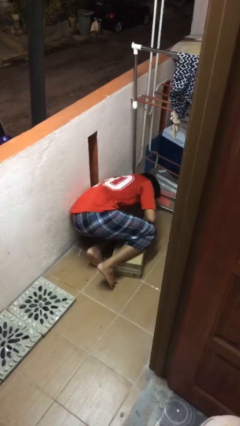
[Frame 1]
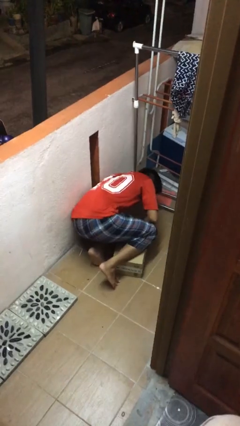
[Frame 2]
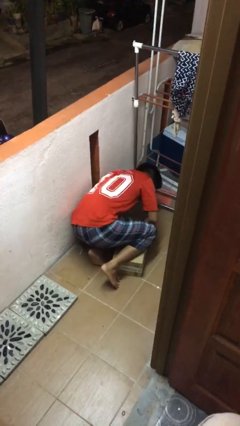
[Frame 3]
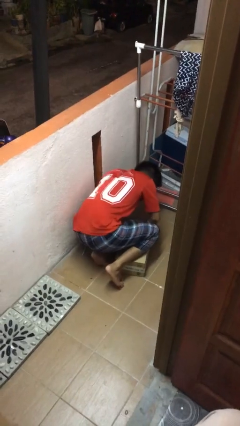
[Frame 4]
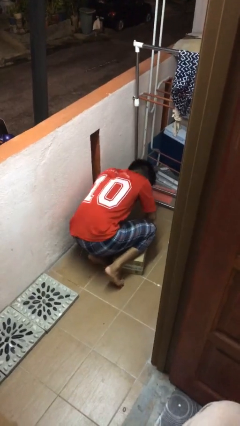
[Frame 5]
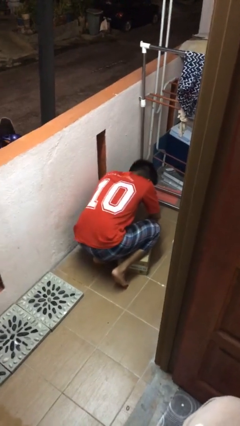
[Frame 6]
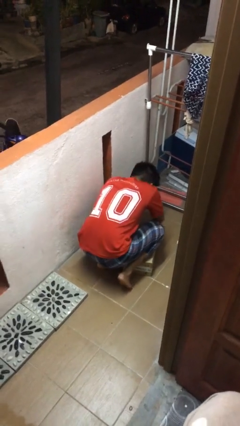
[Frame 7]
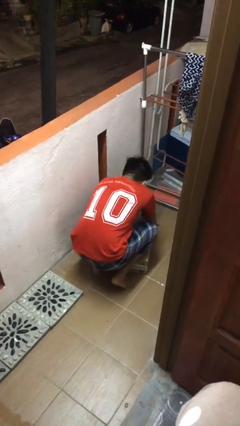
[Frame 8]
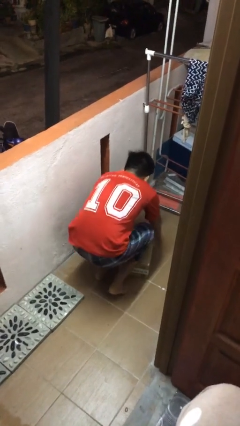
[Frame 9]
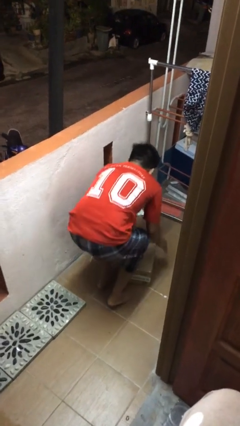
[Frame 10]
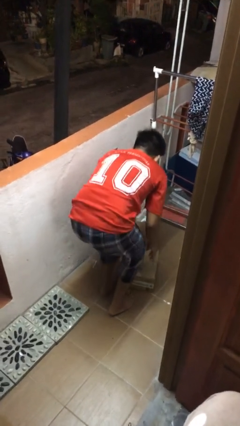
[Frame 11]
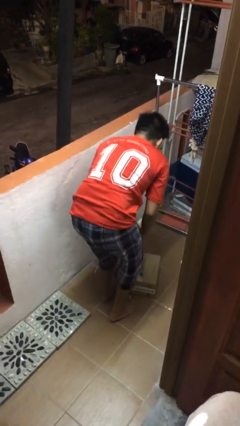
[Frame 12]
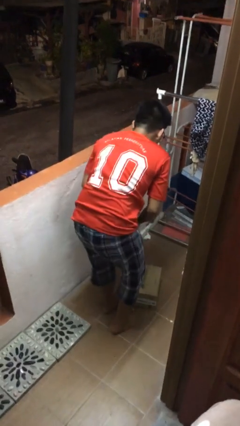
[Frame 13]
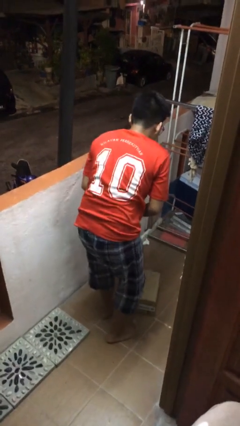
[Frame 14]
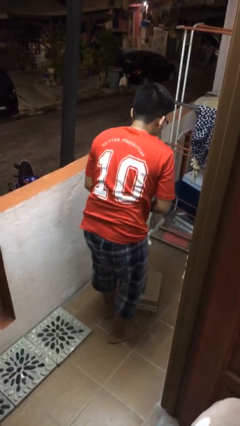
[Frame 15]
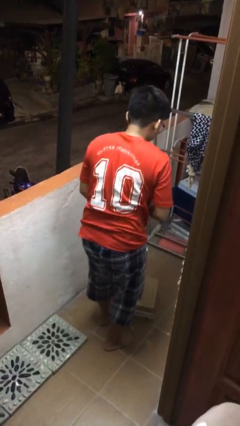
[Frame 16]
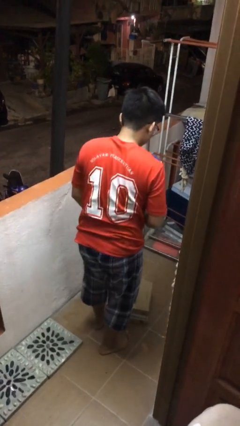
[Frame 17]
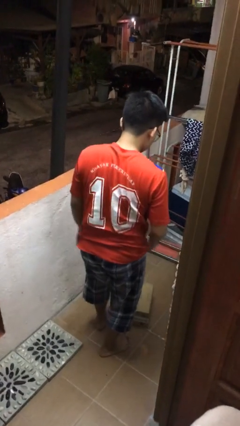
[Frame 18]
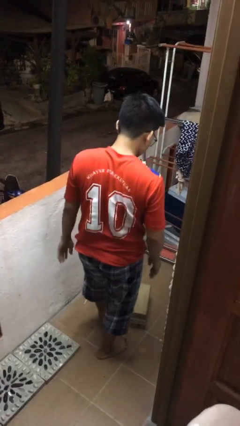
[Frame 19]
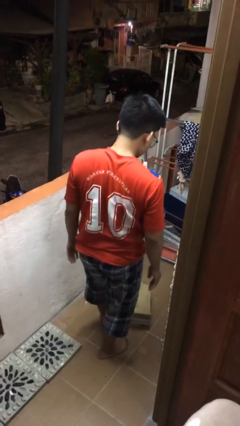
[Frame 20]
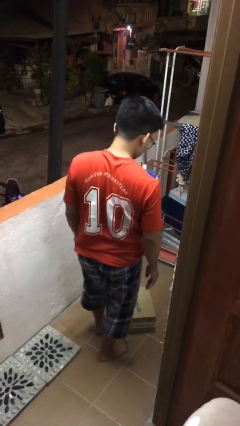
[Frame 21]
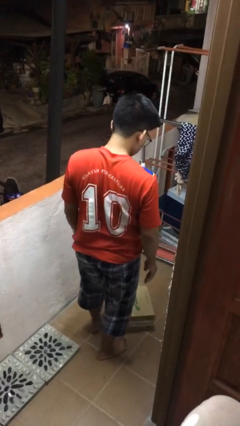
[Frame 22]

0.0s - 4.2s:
person stands up from floor

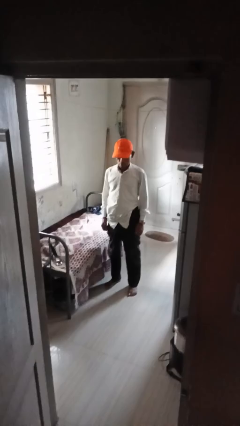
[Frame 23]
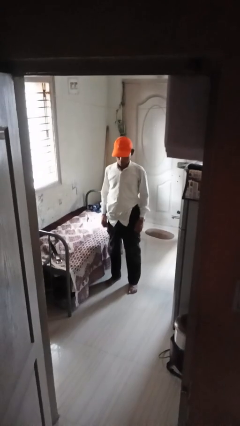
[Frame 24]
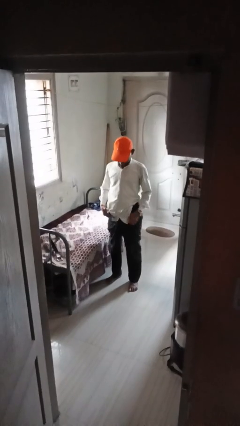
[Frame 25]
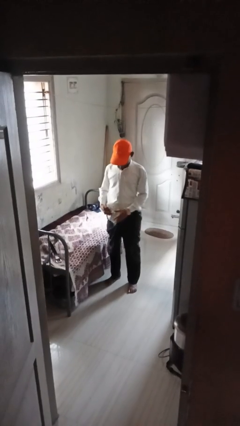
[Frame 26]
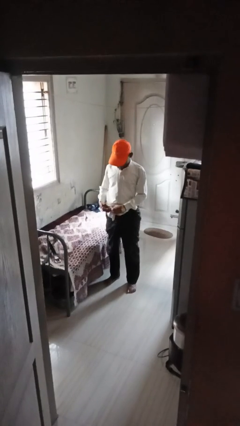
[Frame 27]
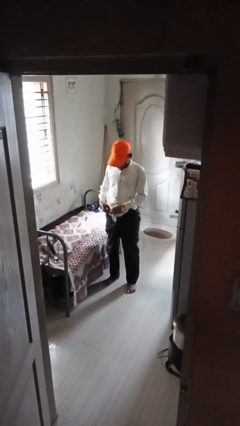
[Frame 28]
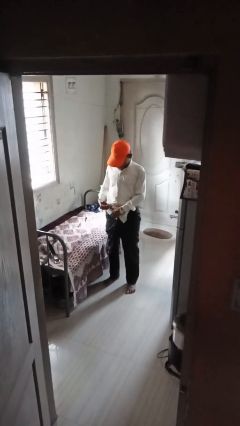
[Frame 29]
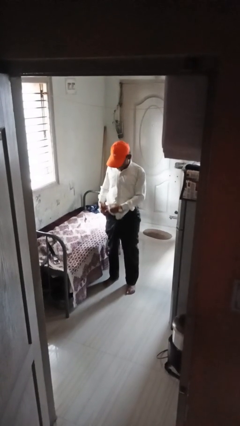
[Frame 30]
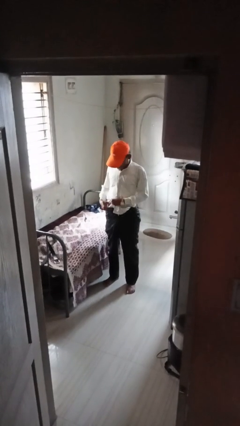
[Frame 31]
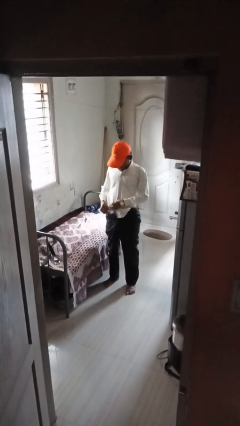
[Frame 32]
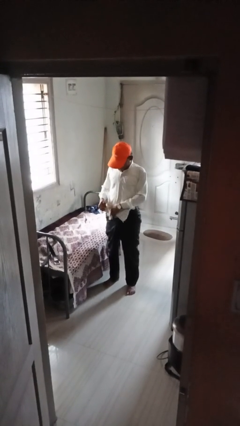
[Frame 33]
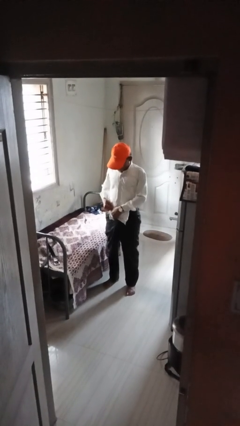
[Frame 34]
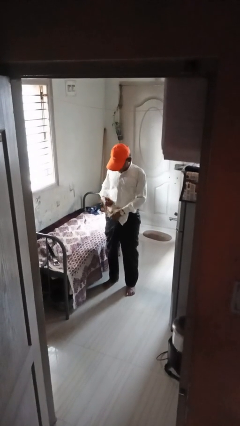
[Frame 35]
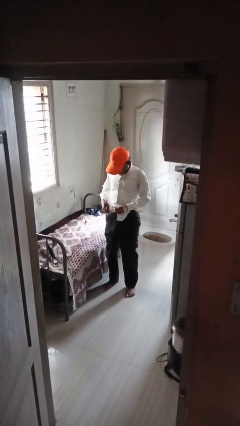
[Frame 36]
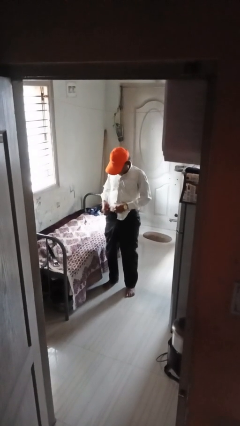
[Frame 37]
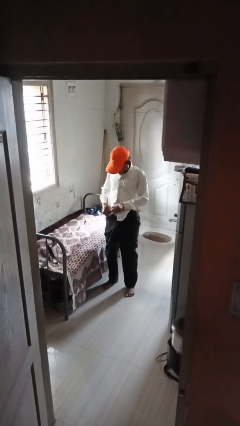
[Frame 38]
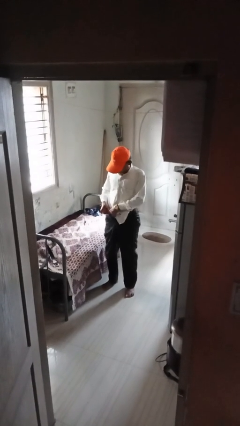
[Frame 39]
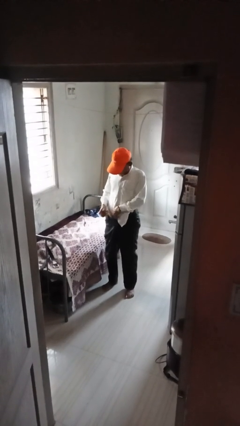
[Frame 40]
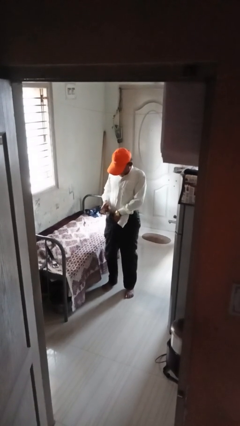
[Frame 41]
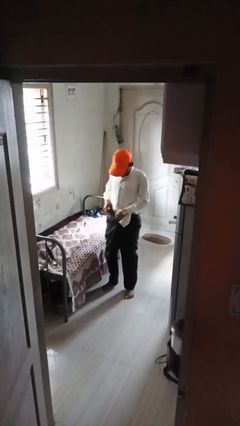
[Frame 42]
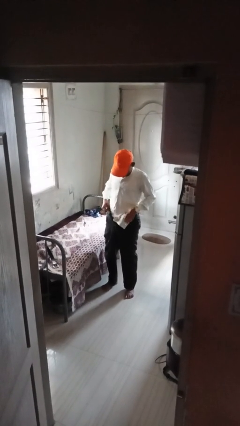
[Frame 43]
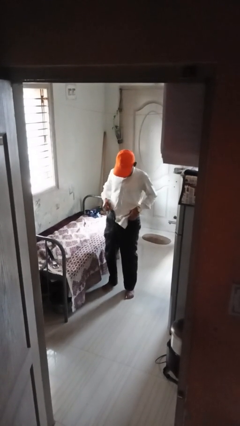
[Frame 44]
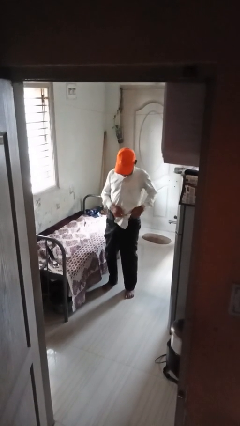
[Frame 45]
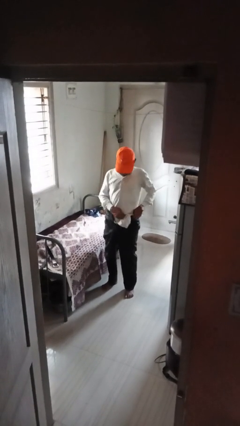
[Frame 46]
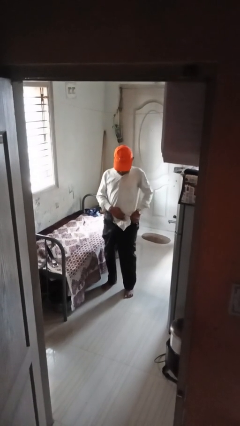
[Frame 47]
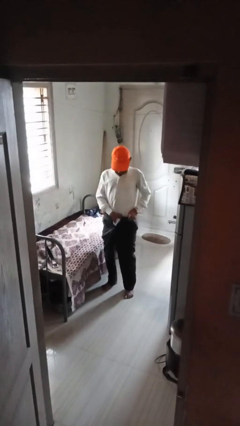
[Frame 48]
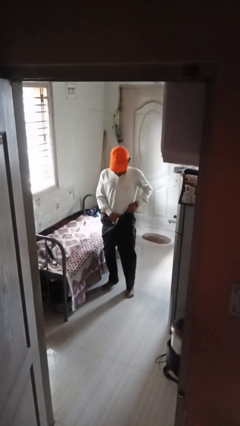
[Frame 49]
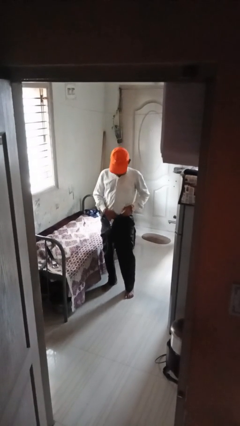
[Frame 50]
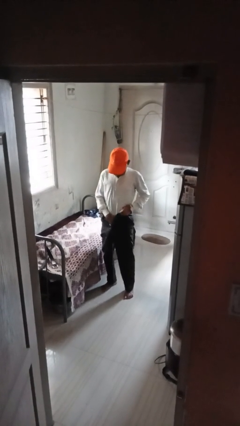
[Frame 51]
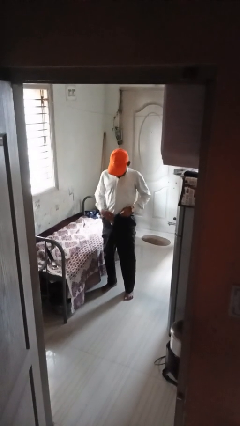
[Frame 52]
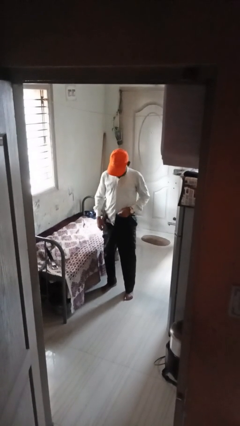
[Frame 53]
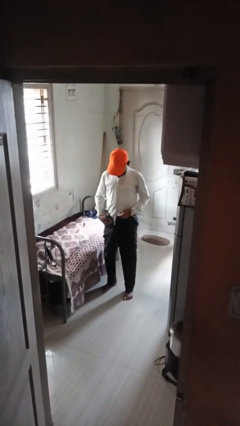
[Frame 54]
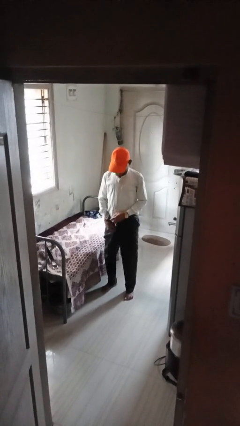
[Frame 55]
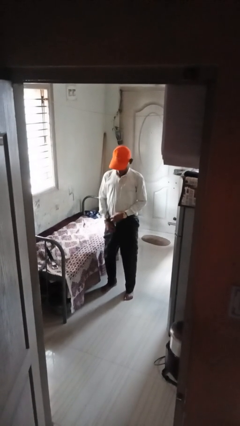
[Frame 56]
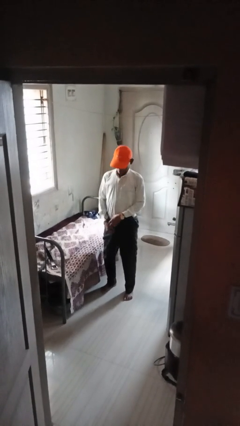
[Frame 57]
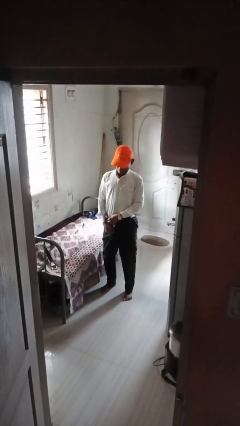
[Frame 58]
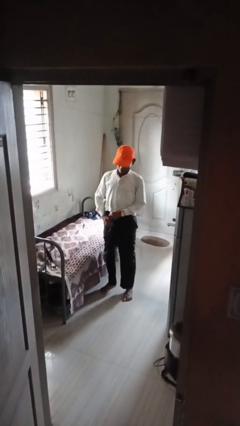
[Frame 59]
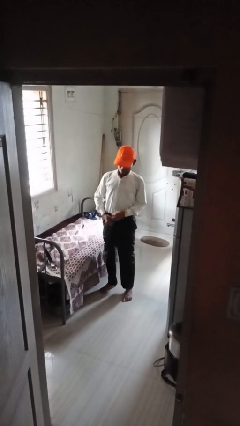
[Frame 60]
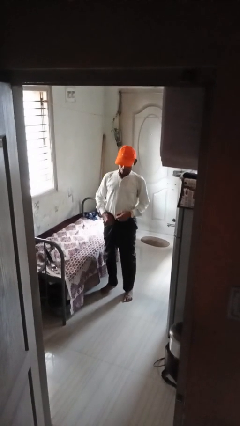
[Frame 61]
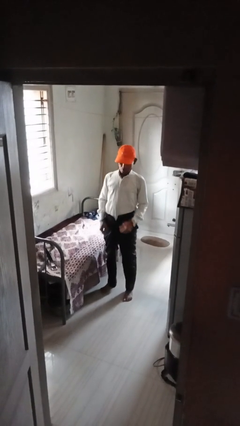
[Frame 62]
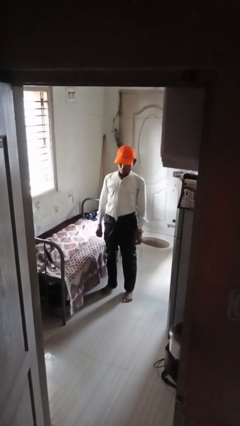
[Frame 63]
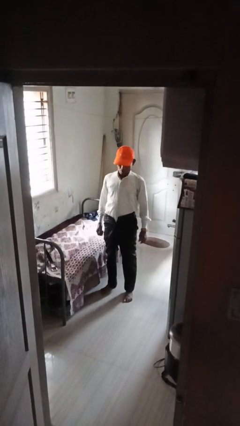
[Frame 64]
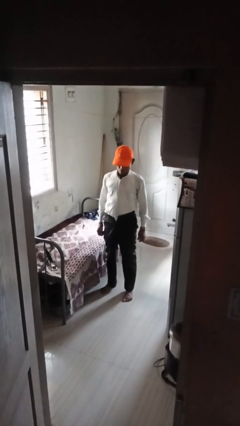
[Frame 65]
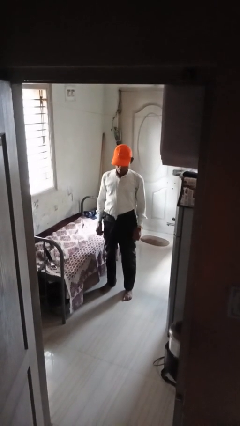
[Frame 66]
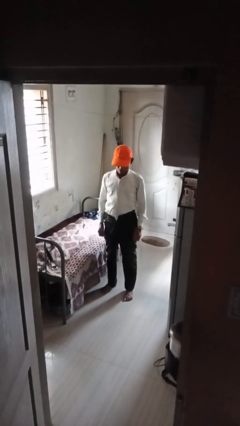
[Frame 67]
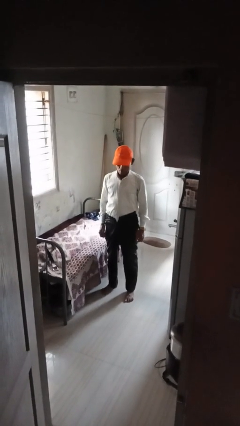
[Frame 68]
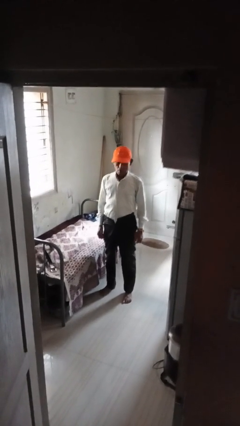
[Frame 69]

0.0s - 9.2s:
person tucks in shirt

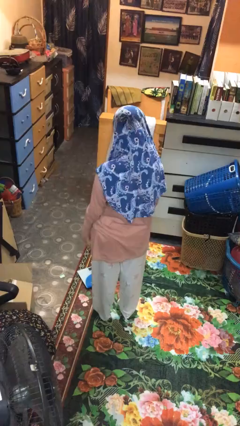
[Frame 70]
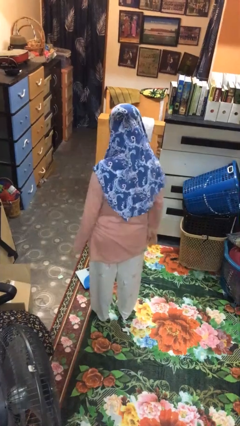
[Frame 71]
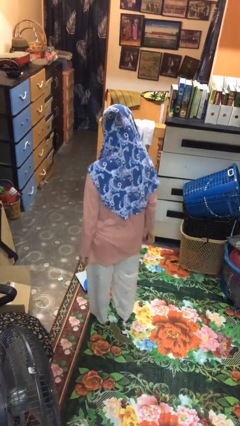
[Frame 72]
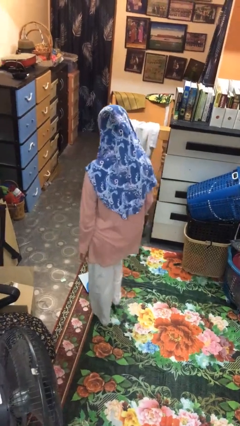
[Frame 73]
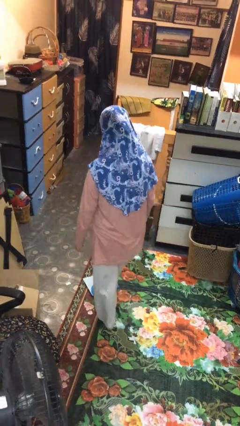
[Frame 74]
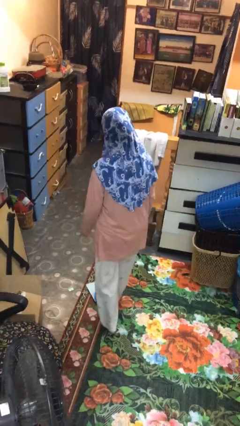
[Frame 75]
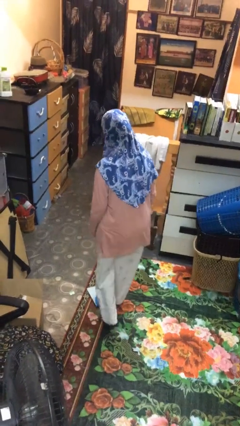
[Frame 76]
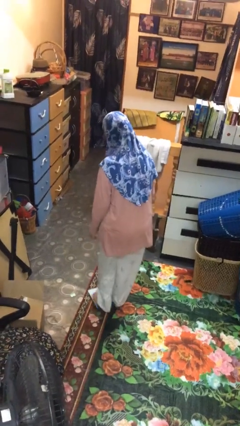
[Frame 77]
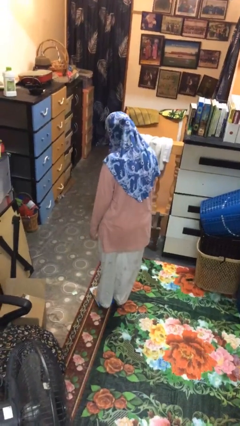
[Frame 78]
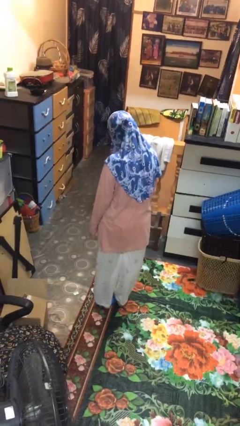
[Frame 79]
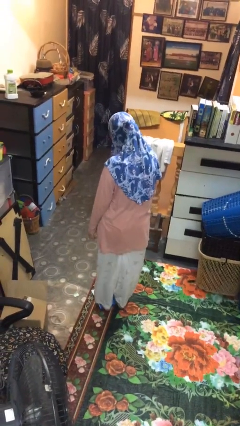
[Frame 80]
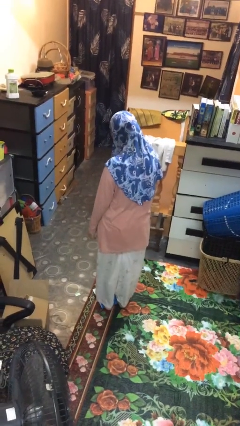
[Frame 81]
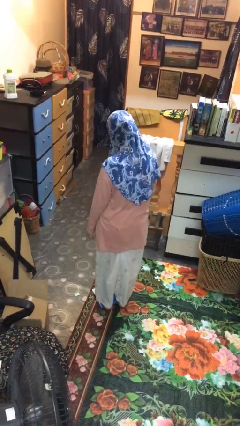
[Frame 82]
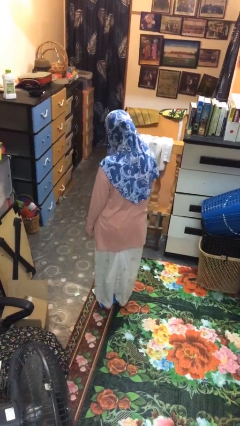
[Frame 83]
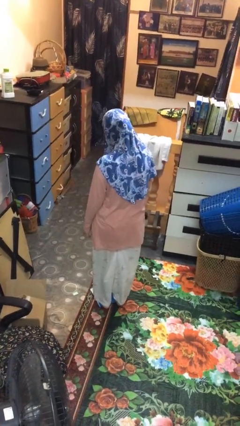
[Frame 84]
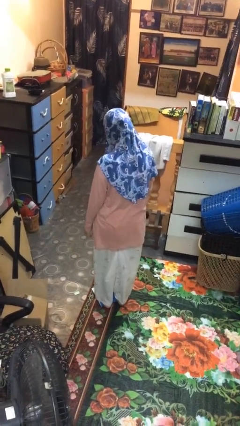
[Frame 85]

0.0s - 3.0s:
person uses bodyweight scale

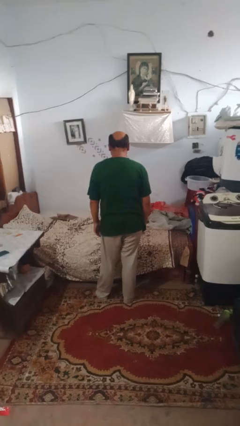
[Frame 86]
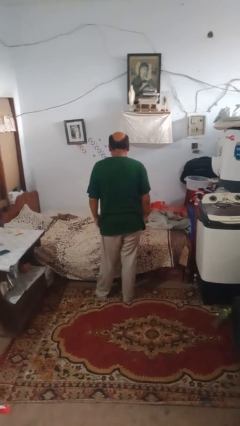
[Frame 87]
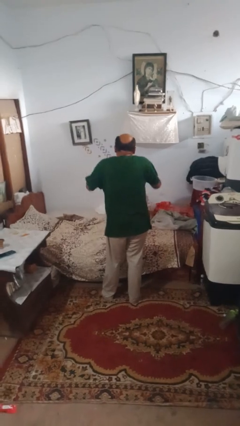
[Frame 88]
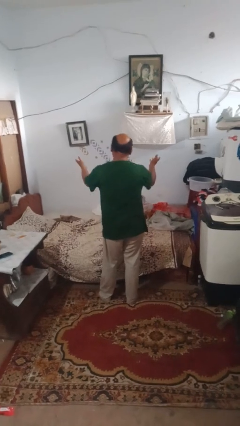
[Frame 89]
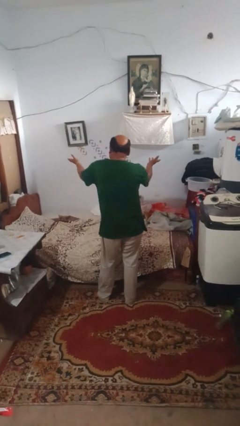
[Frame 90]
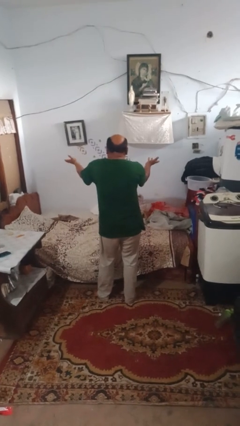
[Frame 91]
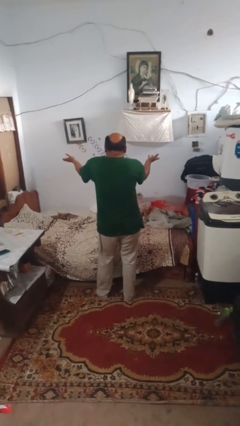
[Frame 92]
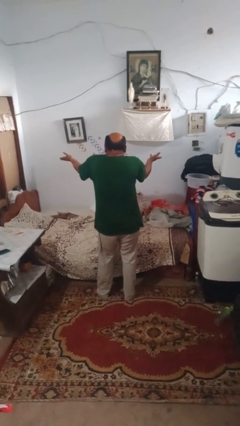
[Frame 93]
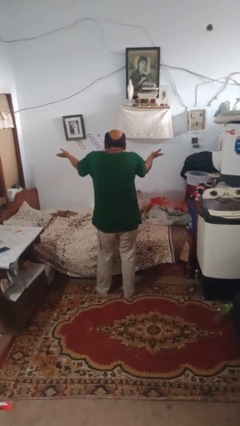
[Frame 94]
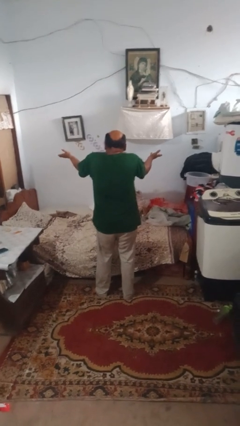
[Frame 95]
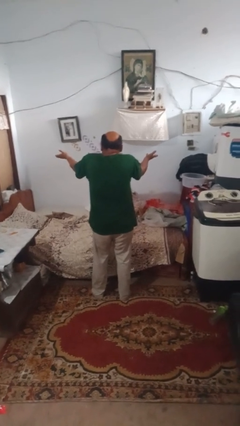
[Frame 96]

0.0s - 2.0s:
person shrugs
